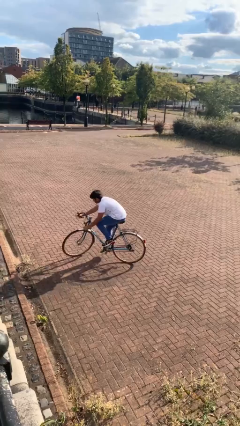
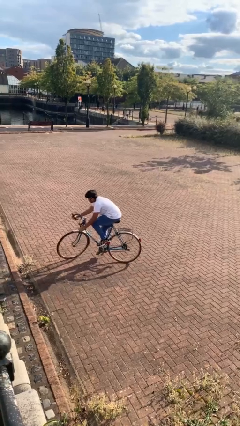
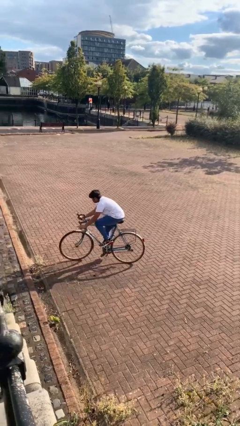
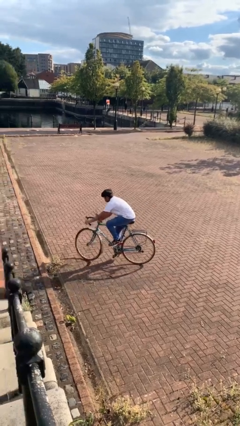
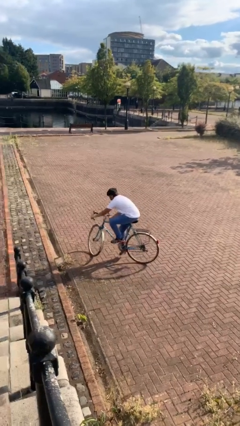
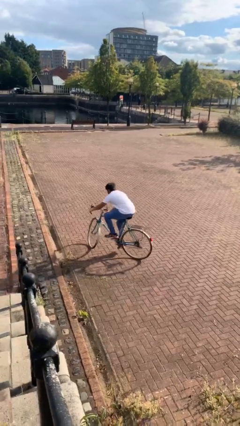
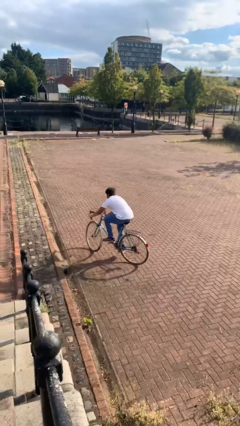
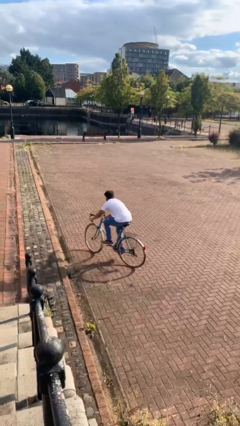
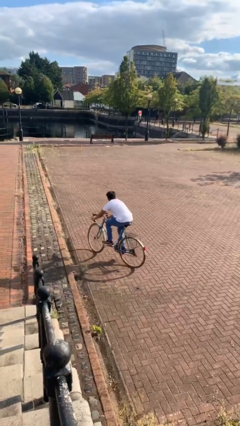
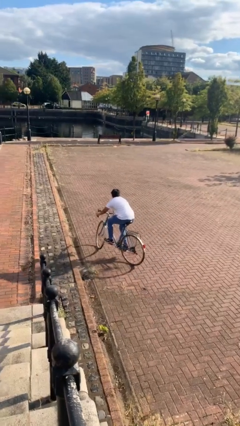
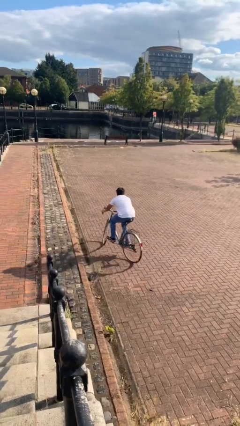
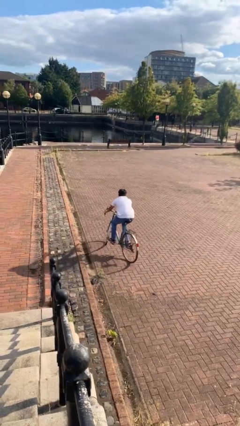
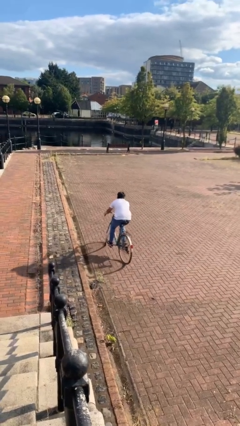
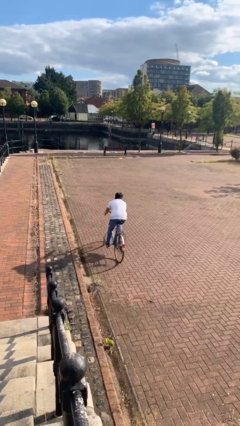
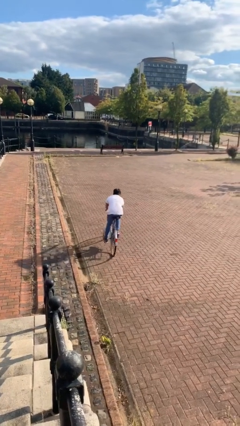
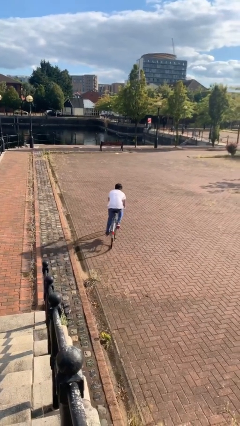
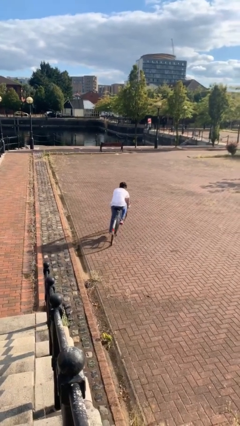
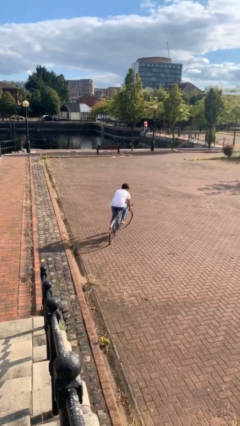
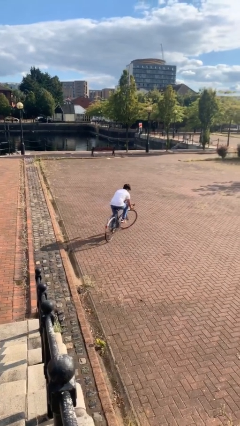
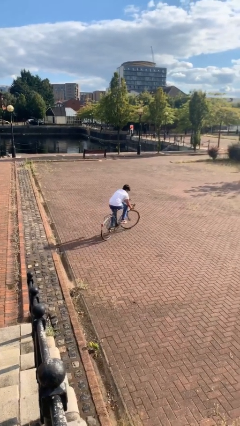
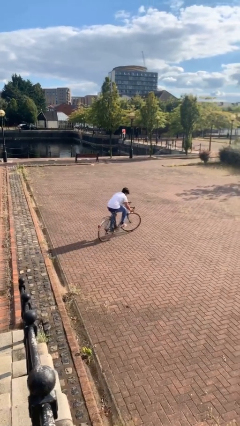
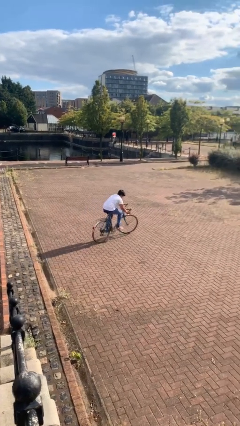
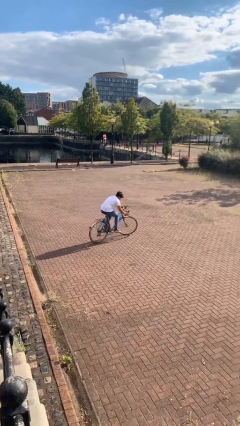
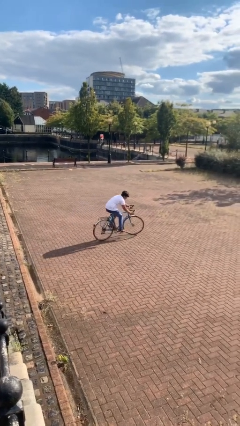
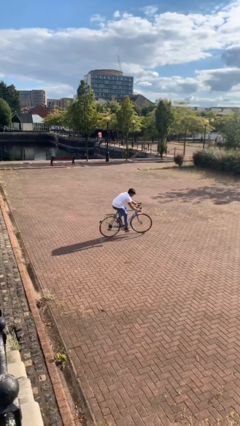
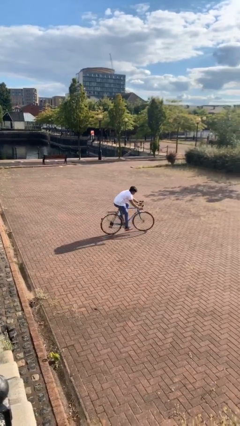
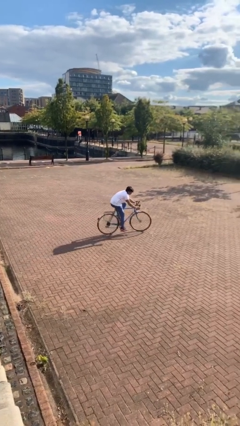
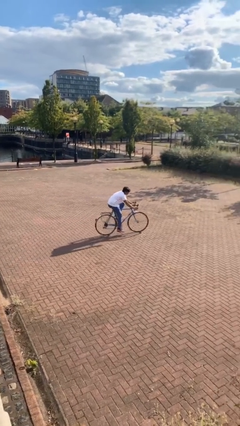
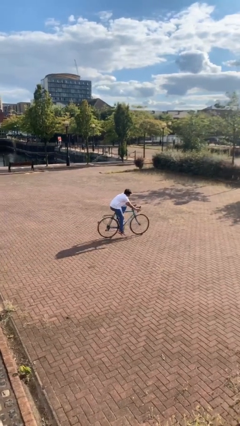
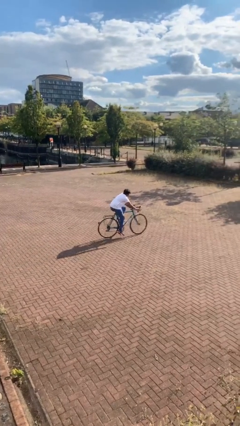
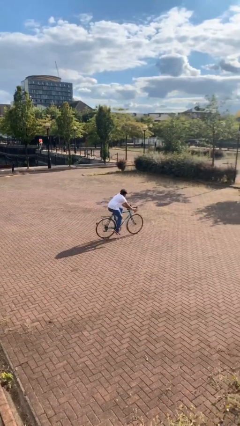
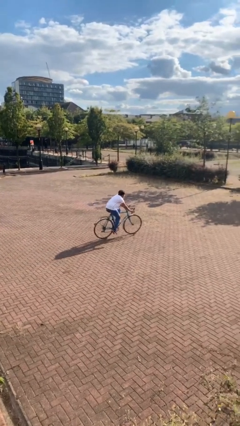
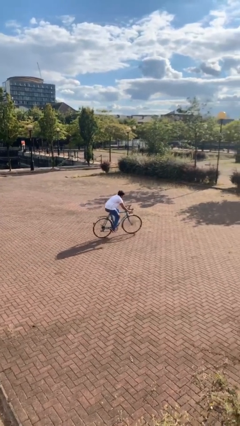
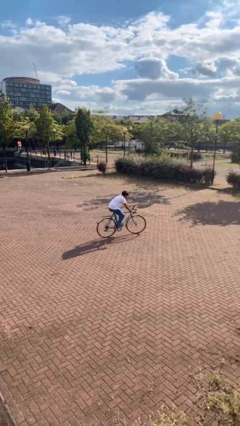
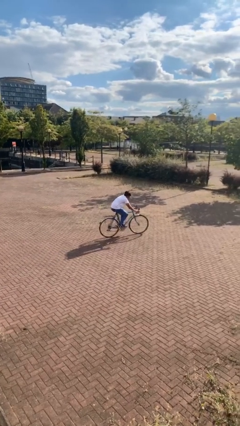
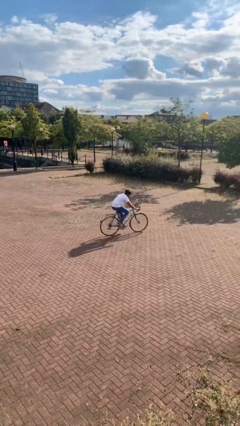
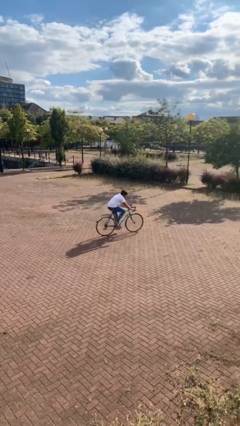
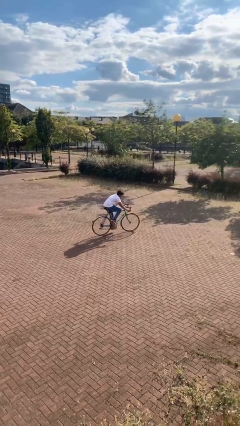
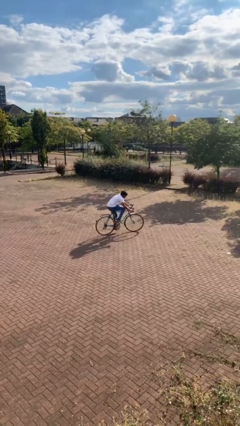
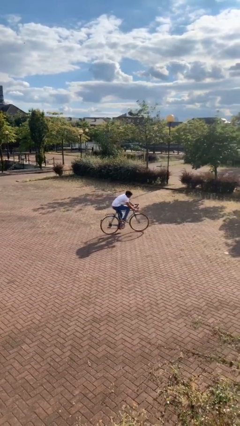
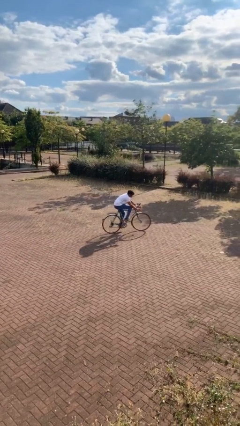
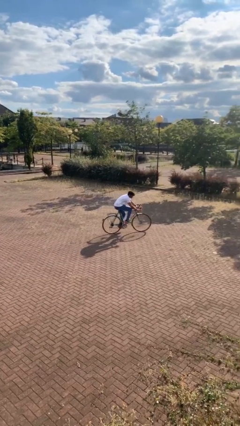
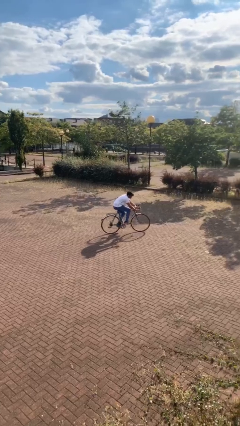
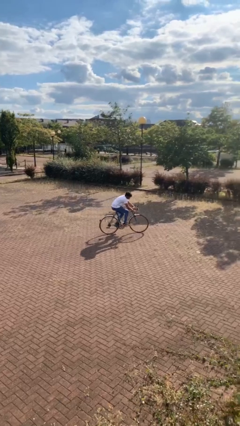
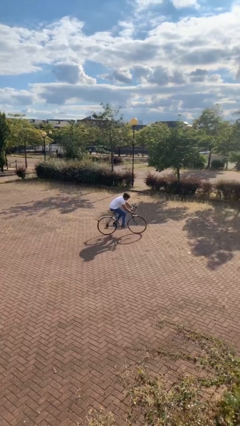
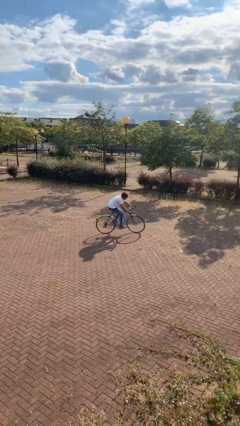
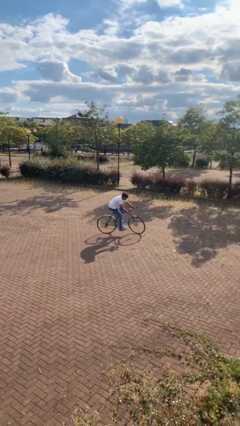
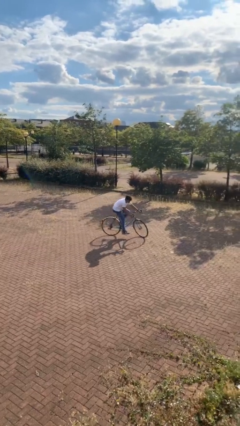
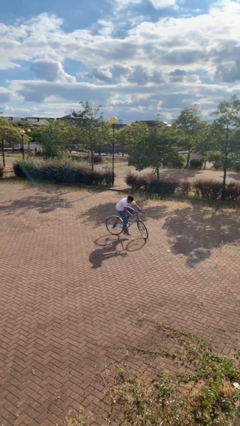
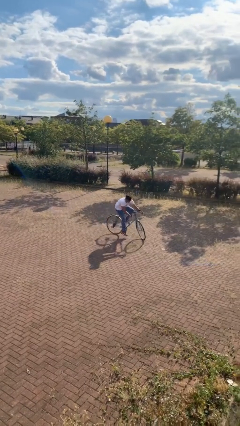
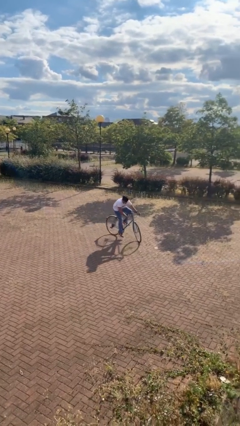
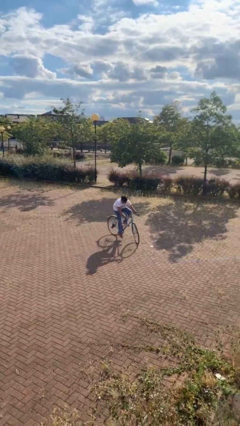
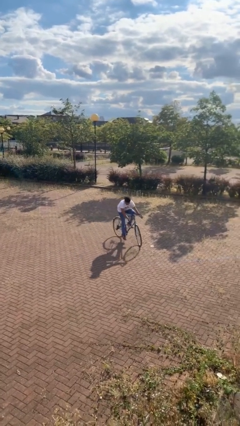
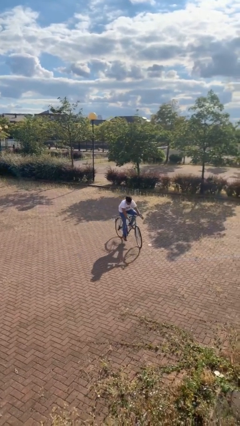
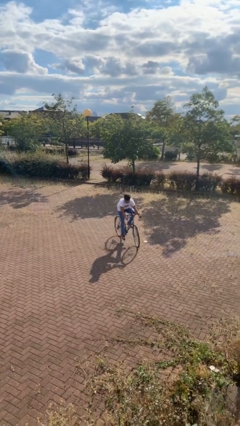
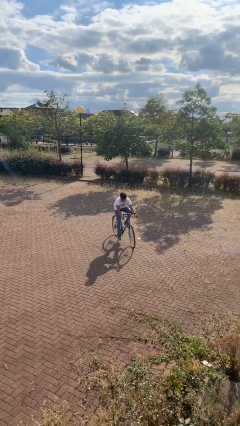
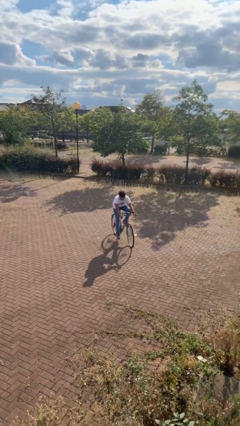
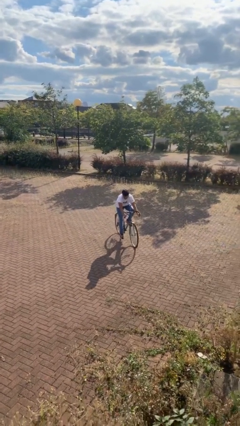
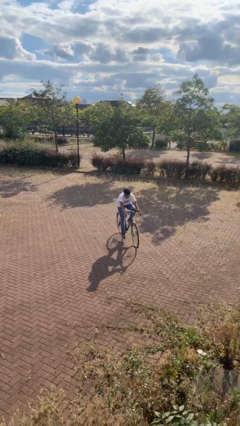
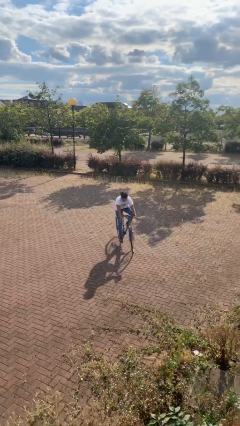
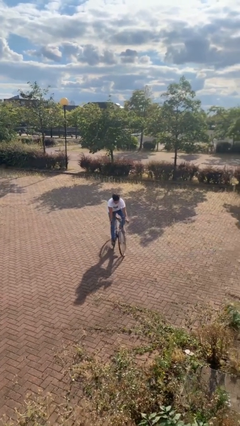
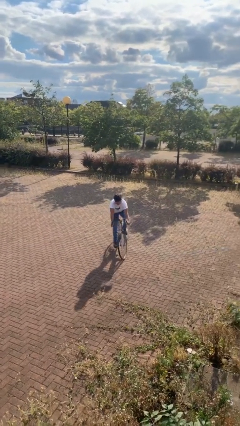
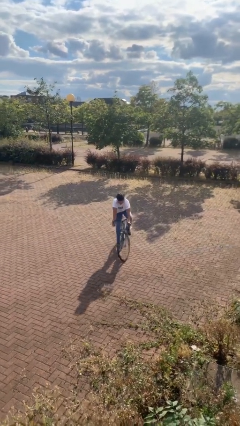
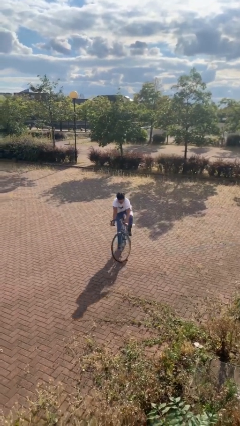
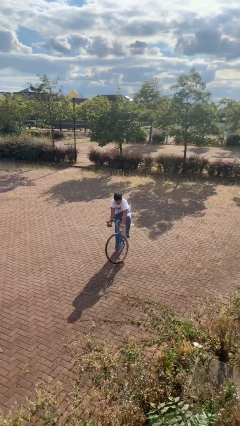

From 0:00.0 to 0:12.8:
person rides bicycle

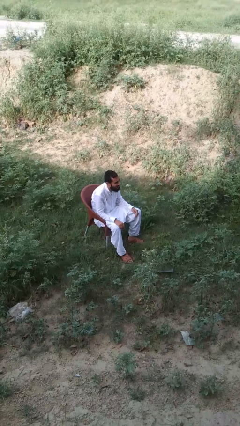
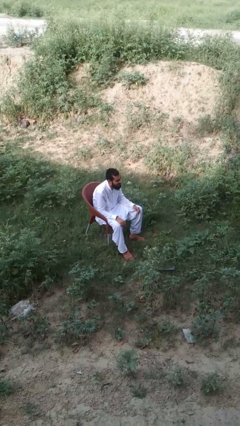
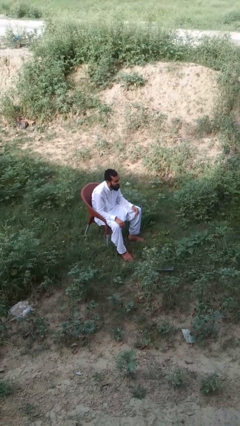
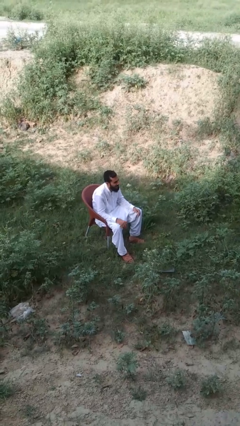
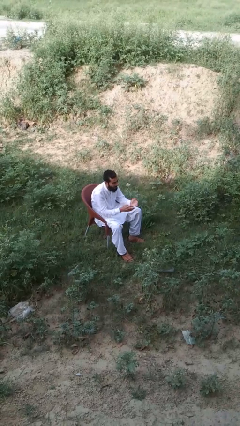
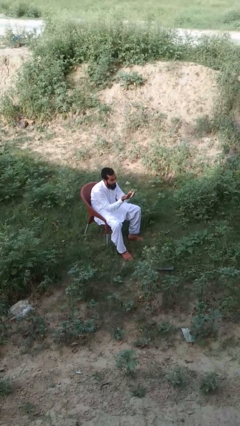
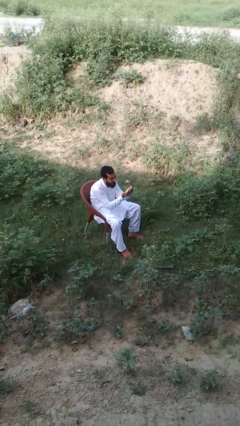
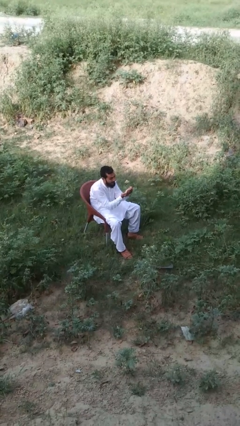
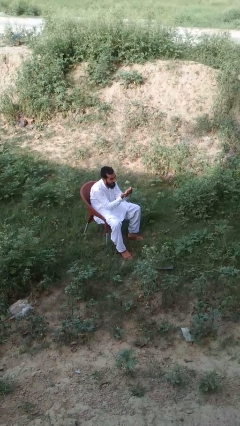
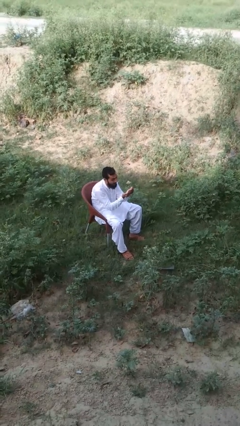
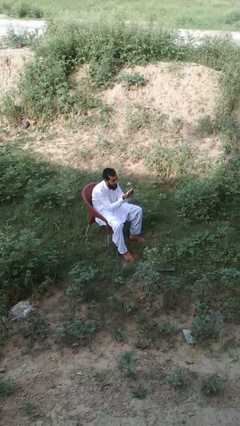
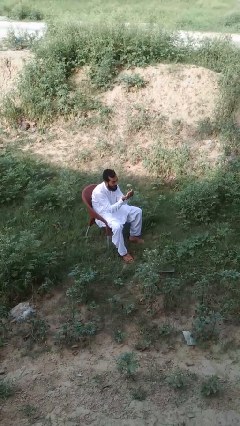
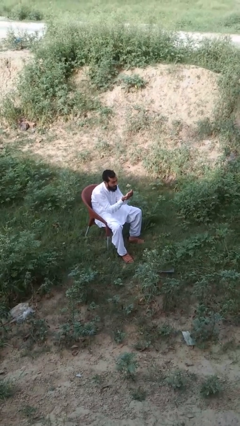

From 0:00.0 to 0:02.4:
person prays

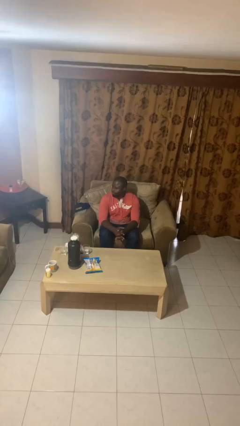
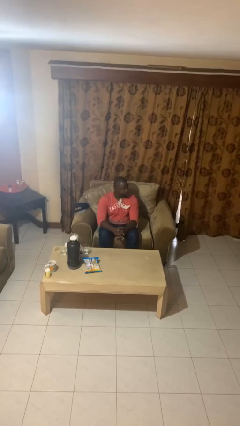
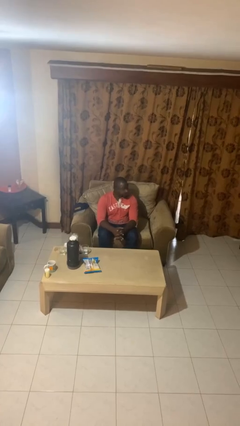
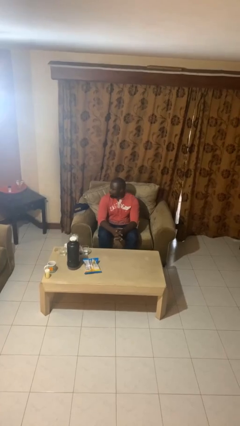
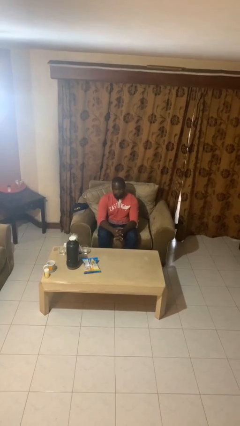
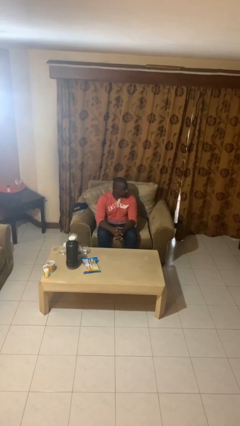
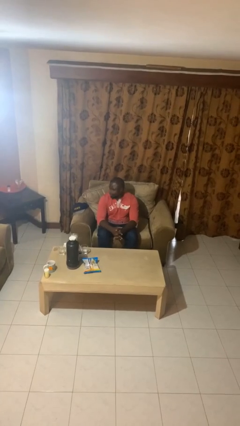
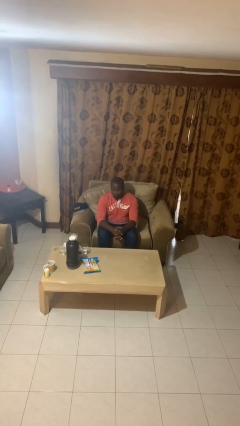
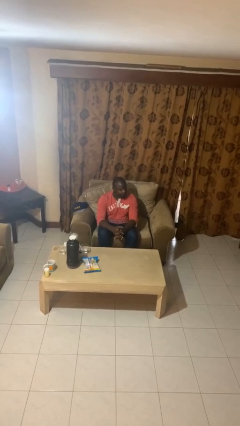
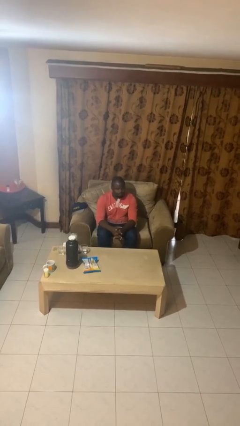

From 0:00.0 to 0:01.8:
person shakes head

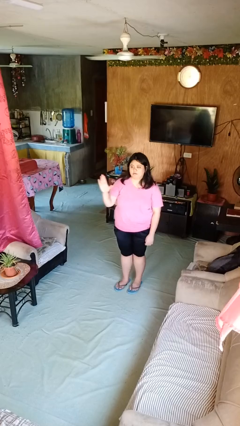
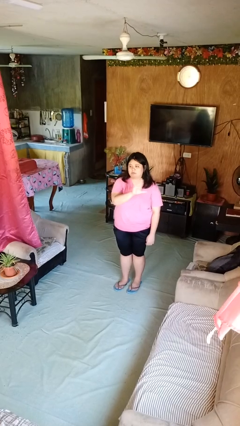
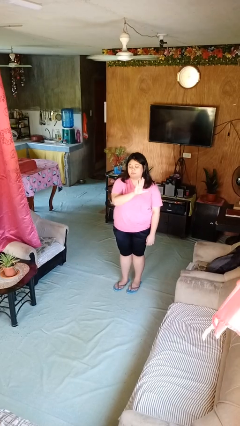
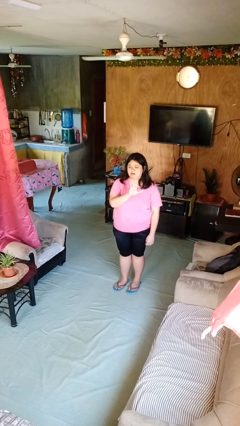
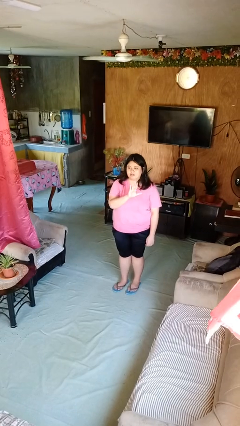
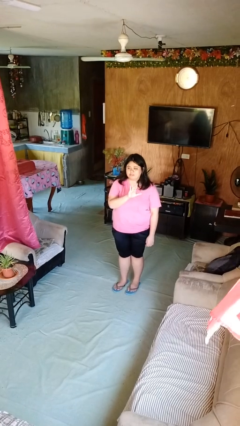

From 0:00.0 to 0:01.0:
person gestures swipe left
